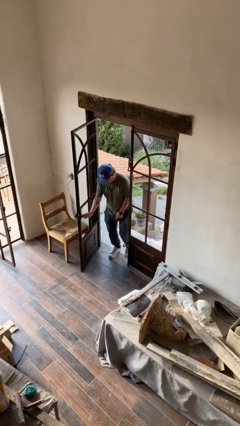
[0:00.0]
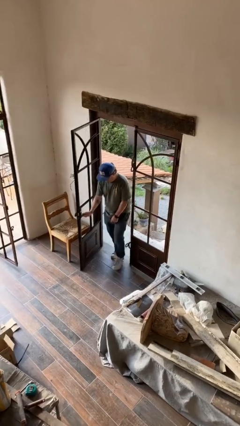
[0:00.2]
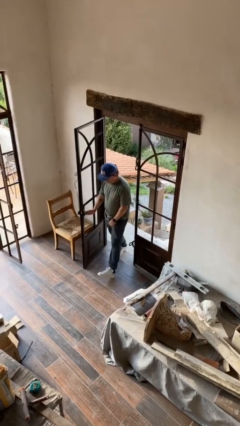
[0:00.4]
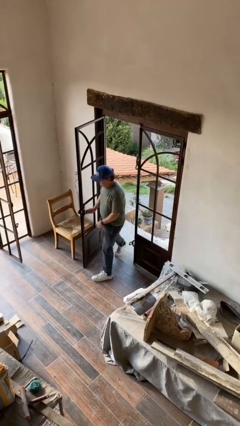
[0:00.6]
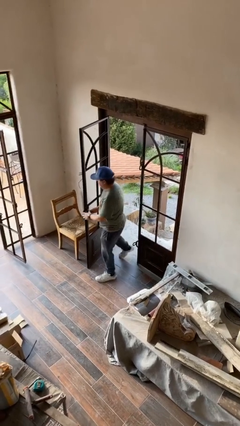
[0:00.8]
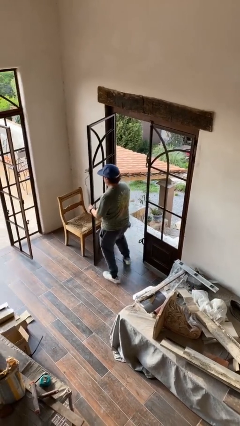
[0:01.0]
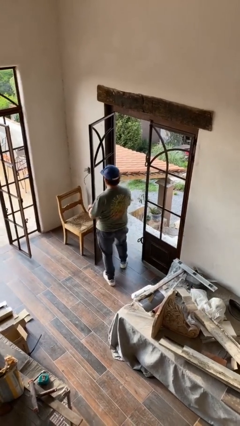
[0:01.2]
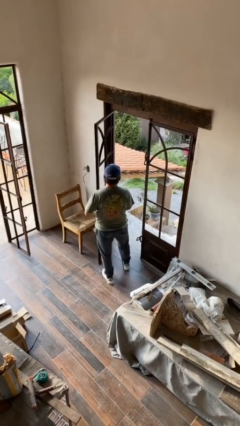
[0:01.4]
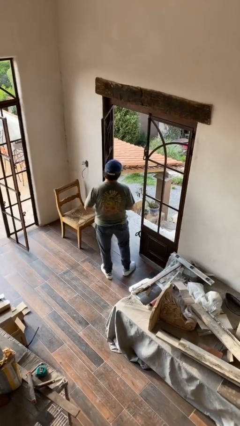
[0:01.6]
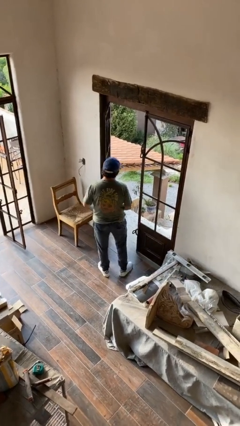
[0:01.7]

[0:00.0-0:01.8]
person enters scene through structure

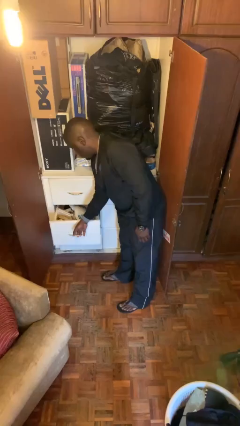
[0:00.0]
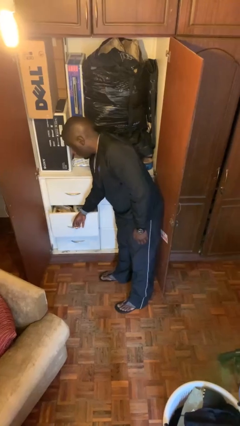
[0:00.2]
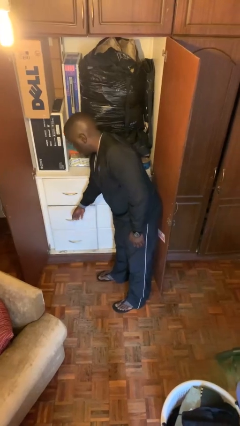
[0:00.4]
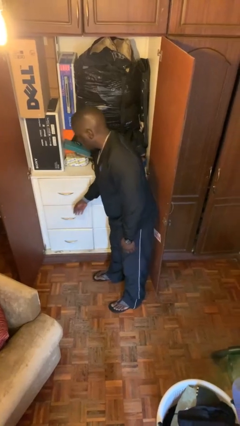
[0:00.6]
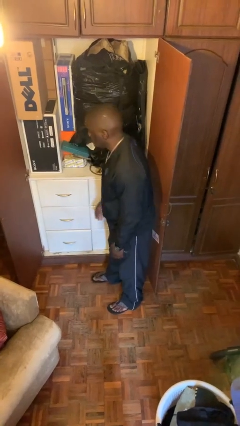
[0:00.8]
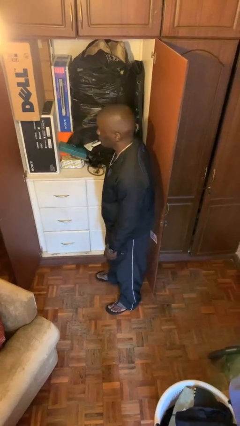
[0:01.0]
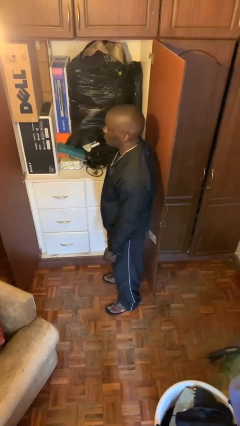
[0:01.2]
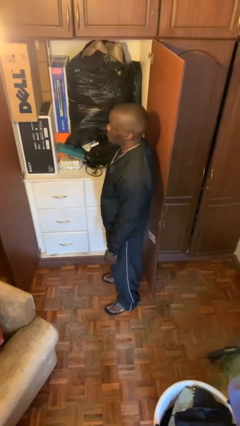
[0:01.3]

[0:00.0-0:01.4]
person closes dresser drawer

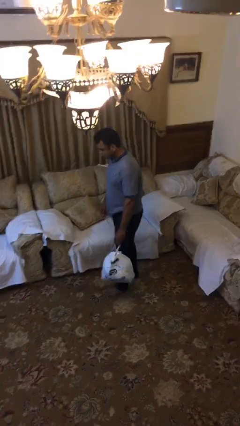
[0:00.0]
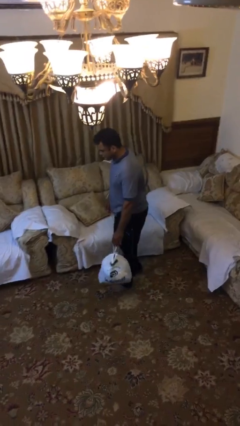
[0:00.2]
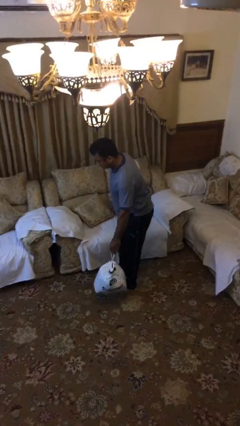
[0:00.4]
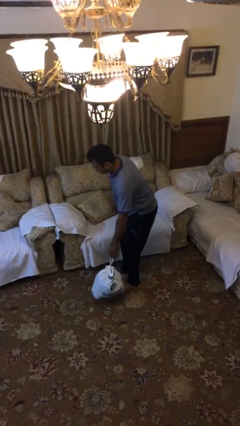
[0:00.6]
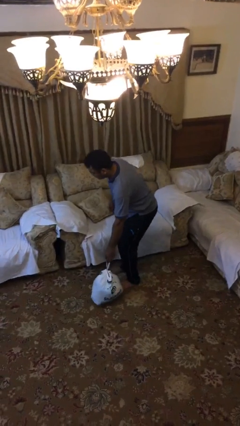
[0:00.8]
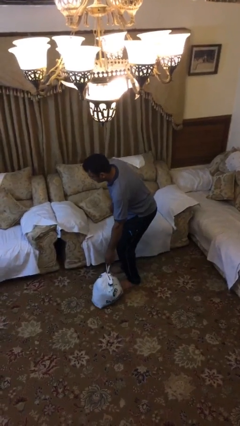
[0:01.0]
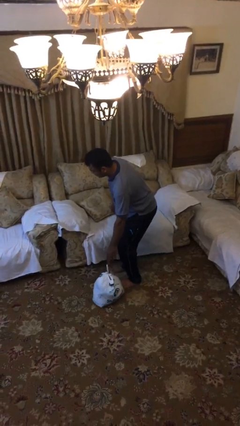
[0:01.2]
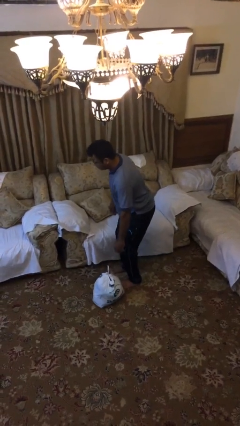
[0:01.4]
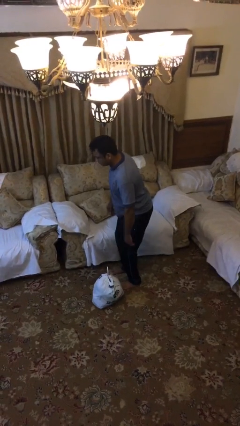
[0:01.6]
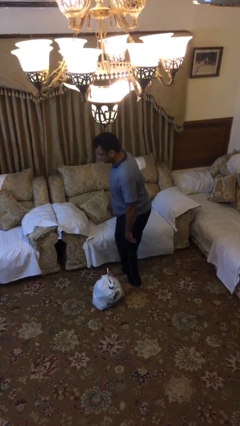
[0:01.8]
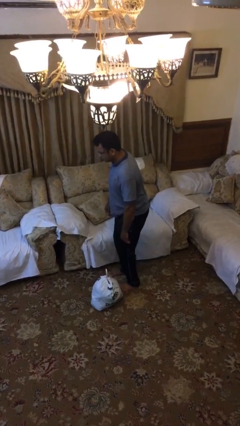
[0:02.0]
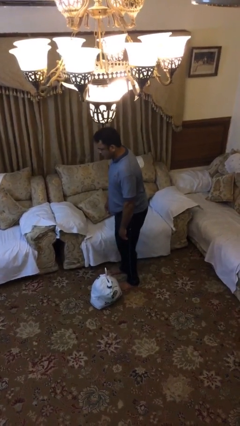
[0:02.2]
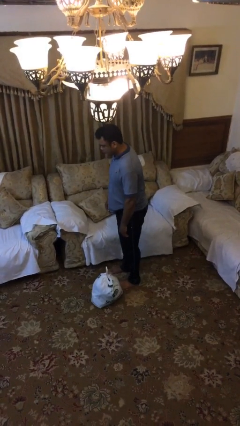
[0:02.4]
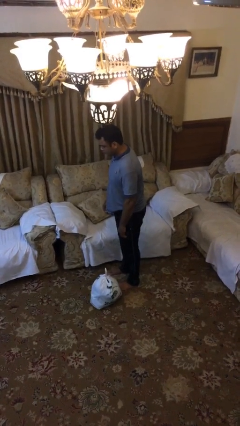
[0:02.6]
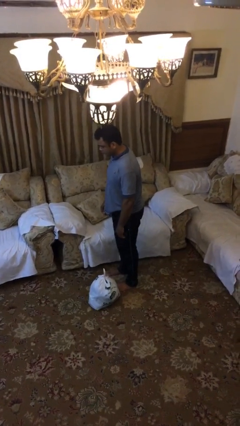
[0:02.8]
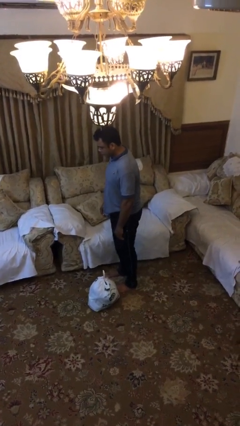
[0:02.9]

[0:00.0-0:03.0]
person puts down object on floor

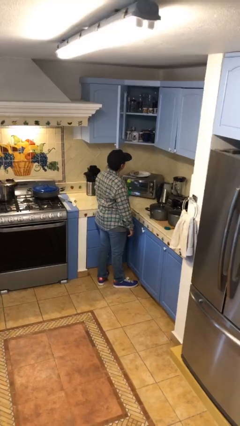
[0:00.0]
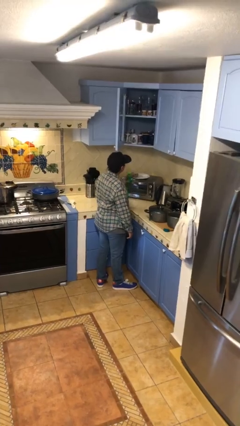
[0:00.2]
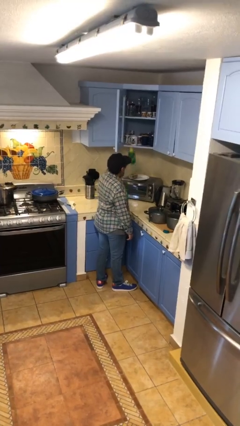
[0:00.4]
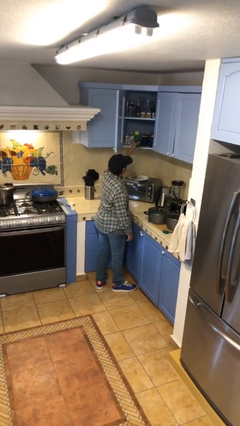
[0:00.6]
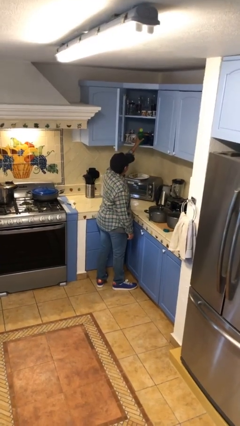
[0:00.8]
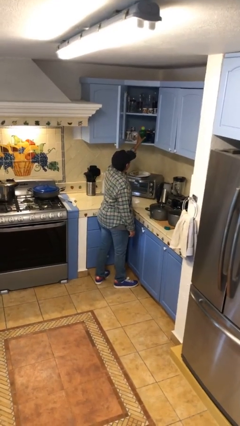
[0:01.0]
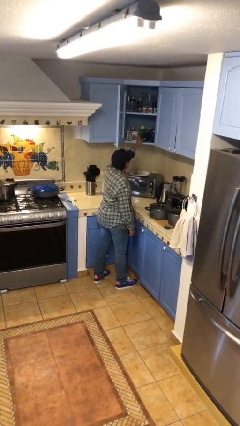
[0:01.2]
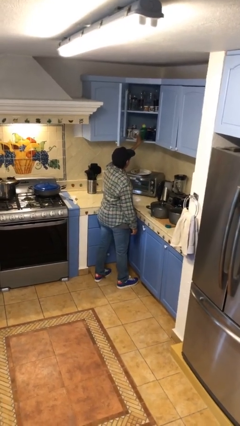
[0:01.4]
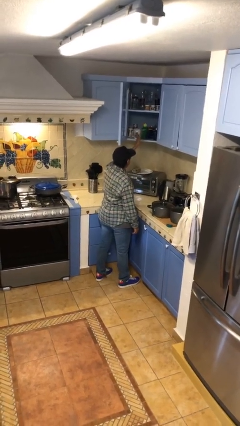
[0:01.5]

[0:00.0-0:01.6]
person puts down object into cabinet

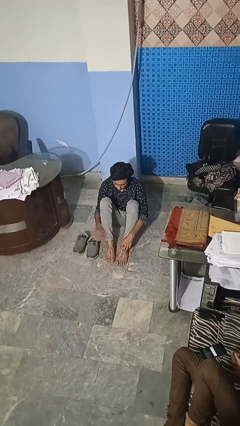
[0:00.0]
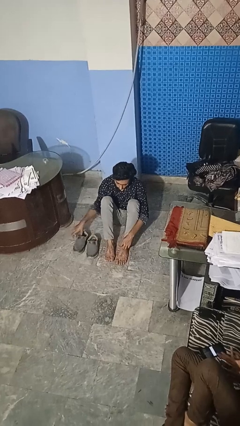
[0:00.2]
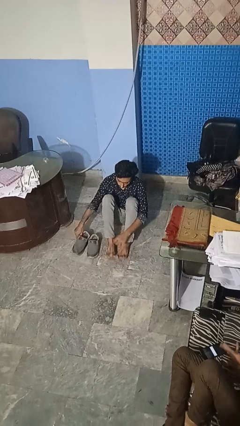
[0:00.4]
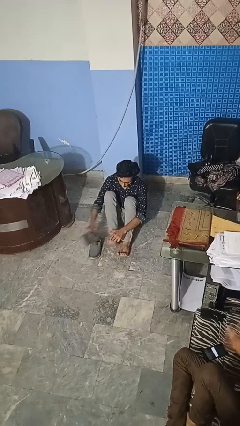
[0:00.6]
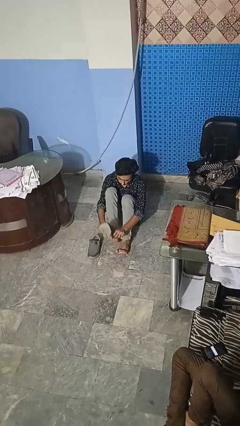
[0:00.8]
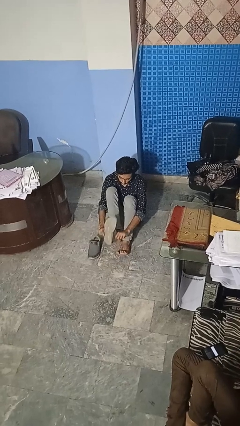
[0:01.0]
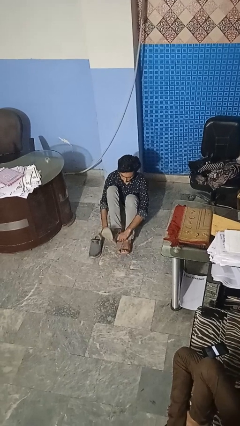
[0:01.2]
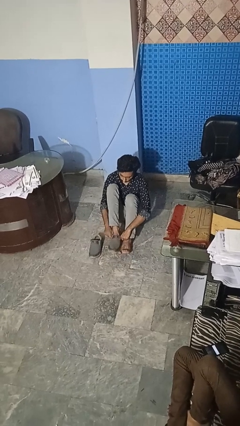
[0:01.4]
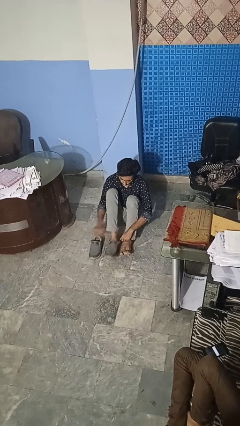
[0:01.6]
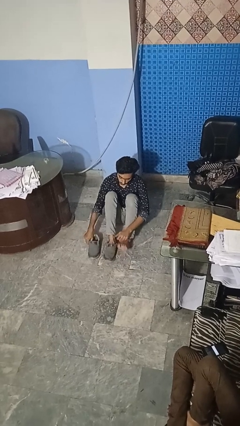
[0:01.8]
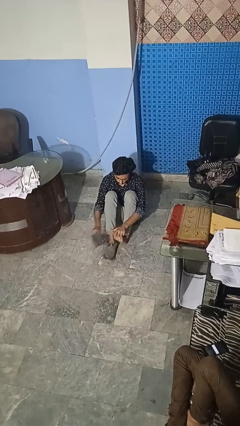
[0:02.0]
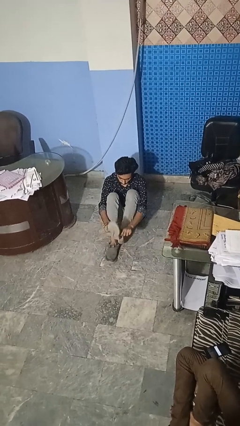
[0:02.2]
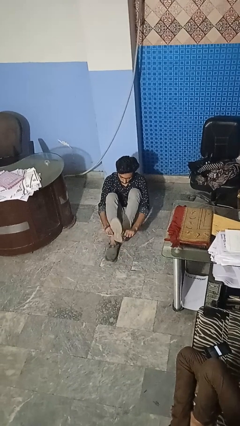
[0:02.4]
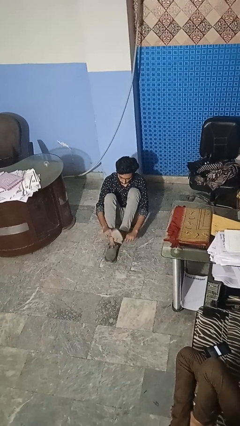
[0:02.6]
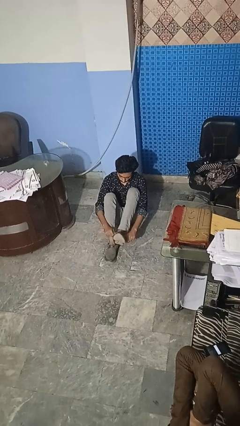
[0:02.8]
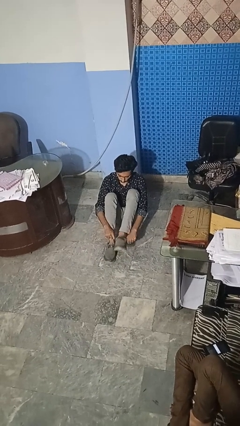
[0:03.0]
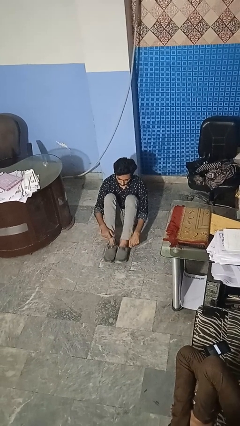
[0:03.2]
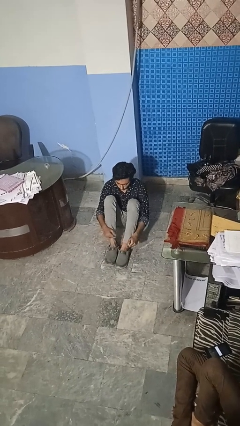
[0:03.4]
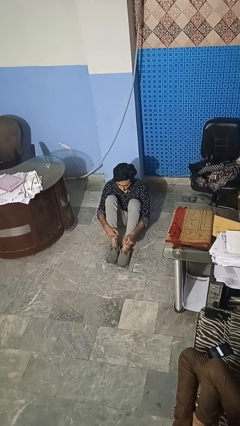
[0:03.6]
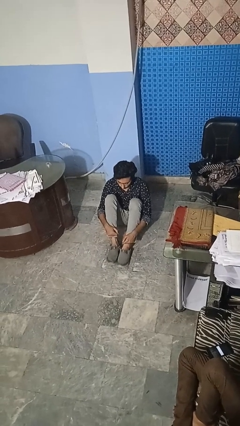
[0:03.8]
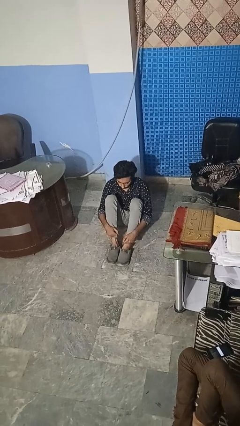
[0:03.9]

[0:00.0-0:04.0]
person puts on shoes

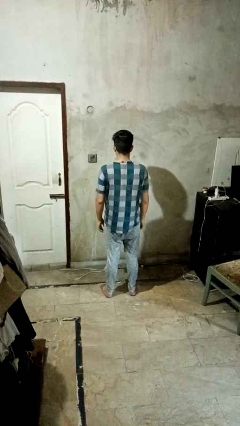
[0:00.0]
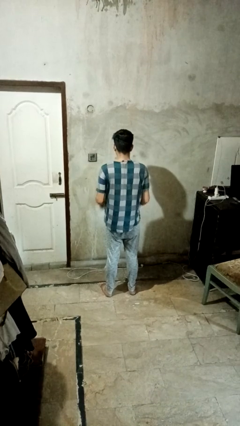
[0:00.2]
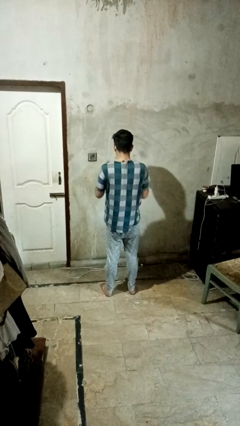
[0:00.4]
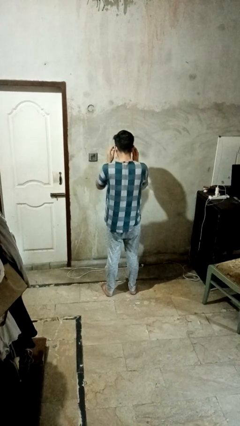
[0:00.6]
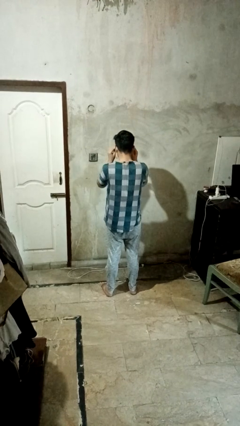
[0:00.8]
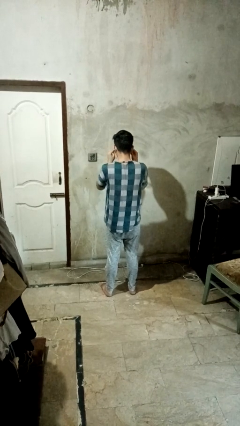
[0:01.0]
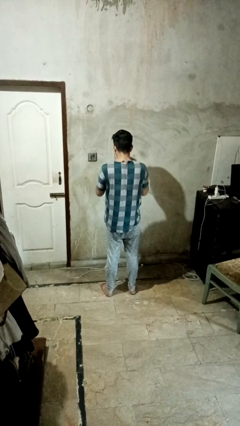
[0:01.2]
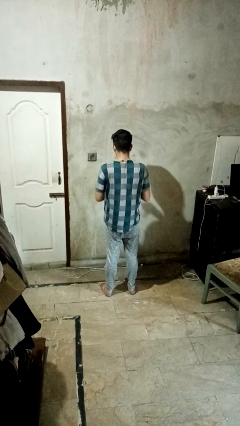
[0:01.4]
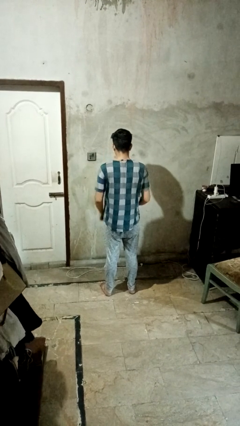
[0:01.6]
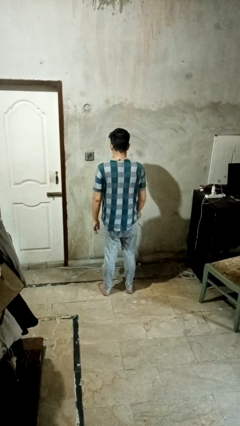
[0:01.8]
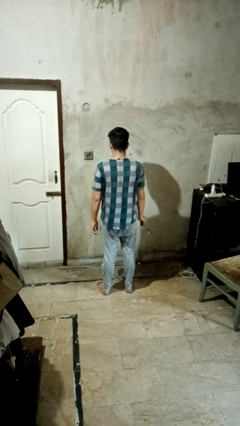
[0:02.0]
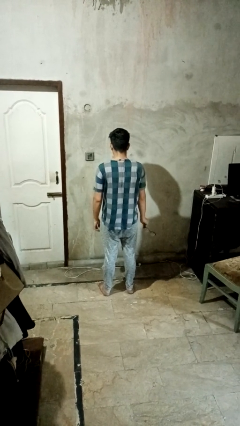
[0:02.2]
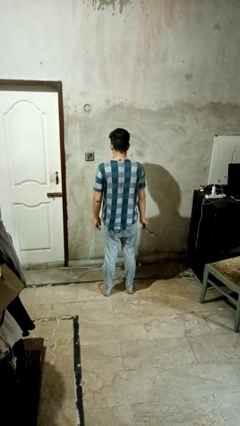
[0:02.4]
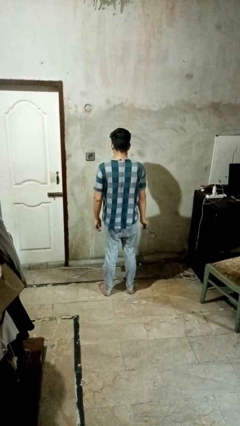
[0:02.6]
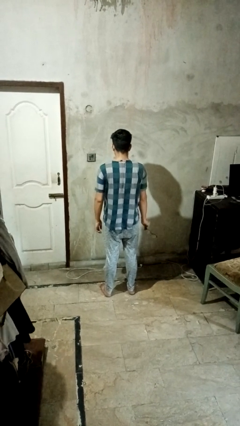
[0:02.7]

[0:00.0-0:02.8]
person takes off glasses

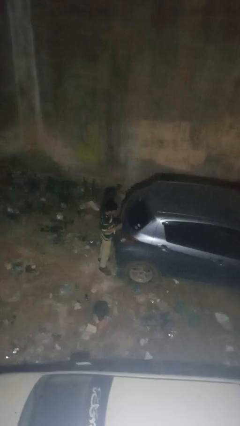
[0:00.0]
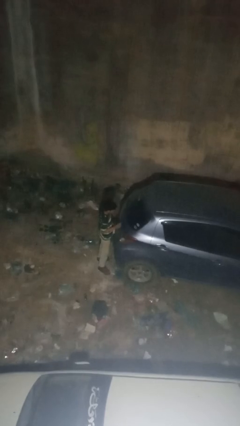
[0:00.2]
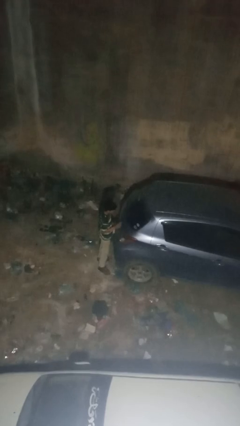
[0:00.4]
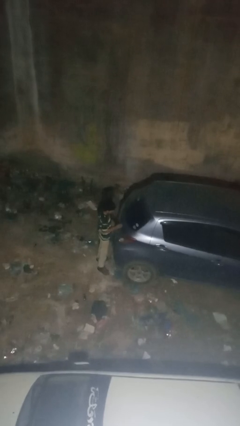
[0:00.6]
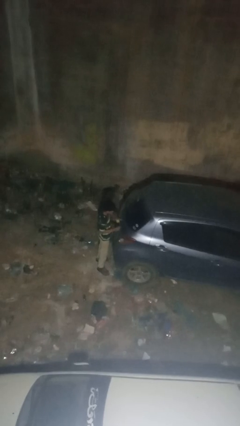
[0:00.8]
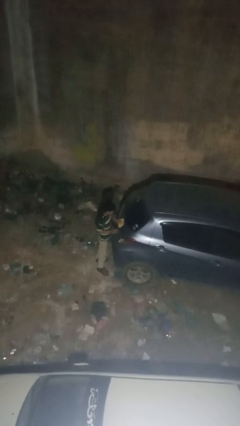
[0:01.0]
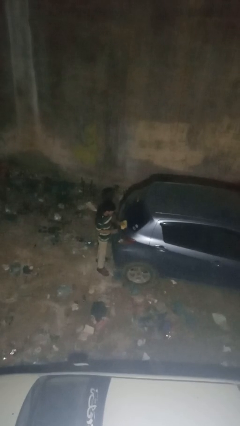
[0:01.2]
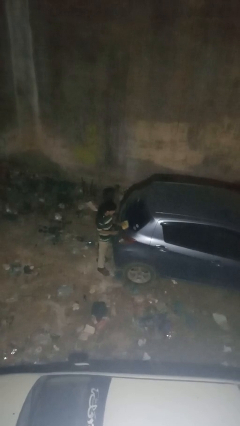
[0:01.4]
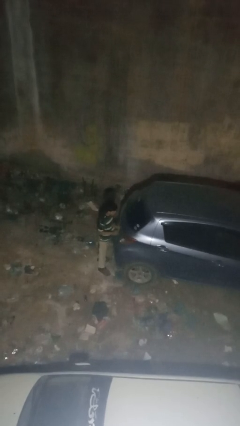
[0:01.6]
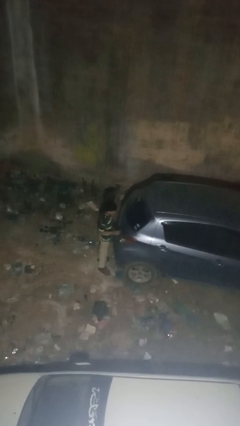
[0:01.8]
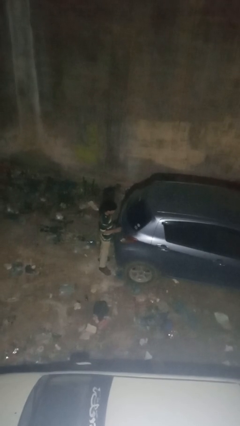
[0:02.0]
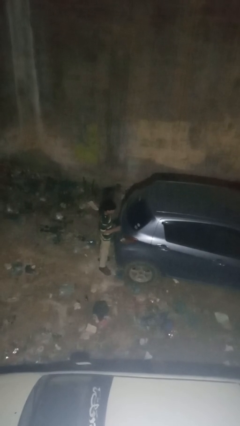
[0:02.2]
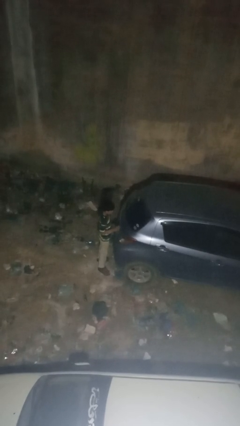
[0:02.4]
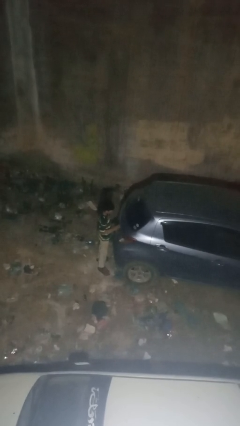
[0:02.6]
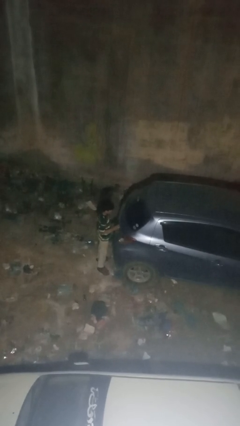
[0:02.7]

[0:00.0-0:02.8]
person polishes car with rag
